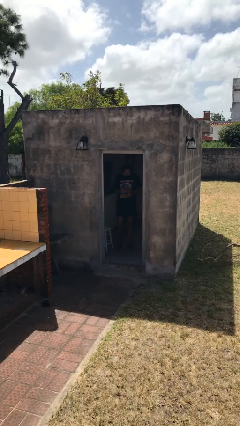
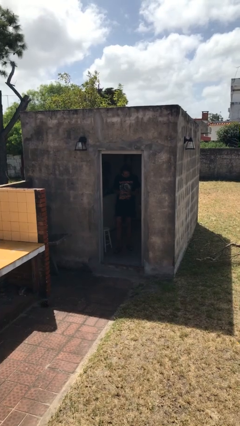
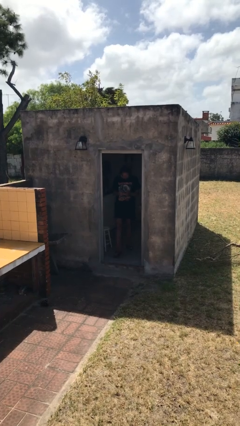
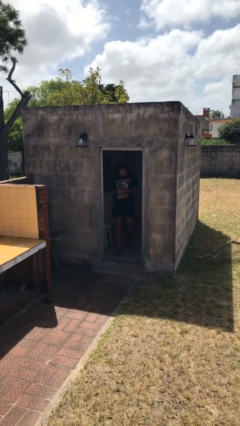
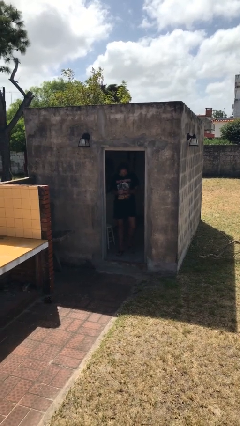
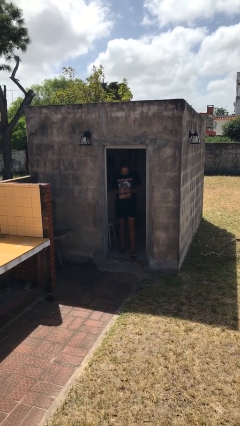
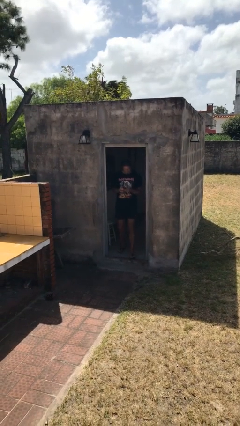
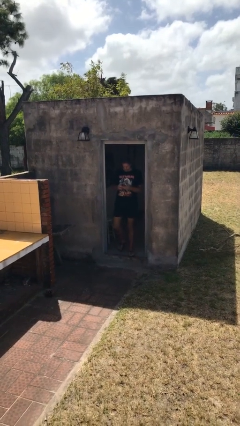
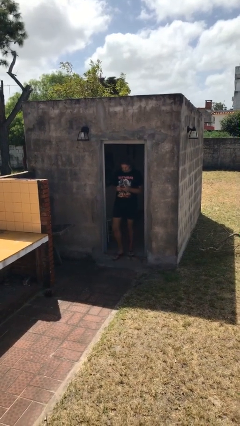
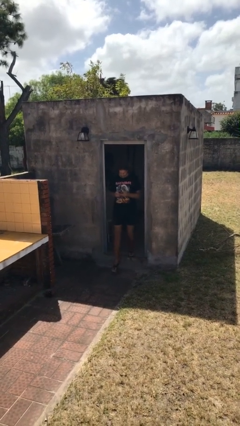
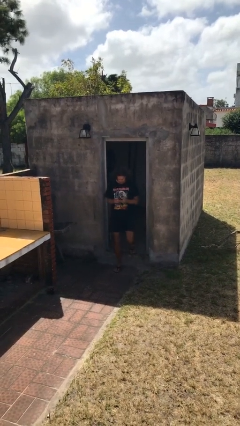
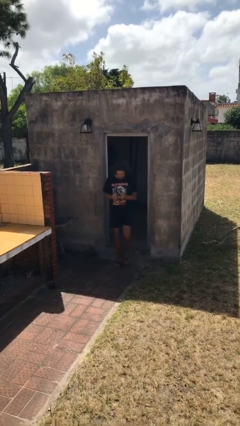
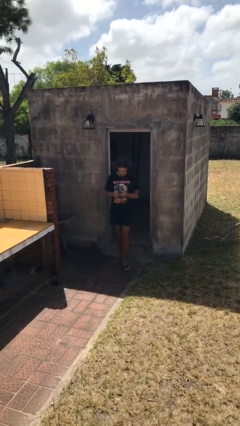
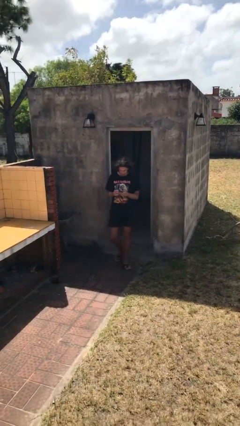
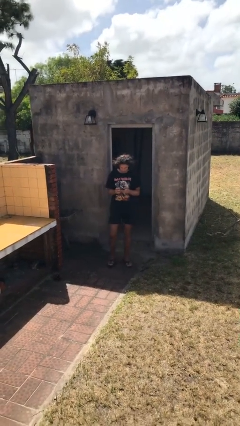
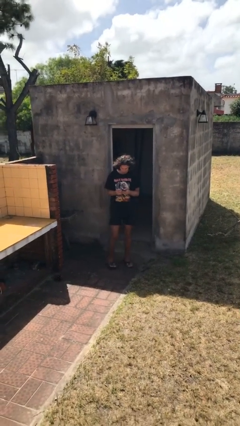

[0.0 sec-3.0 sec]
person enters scene through structure

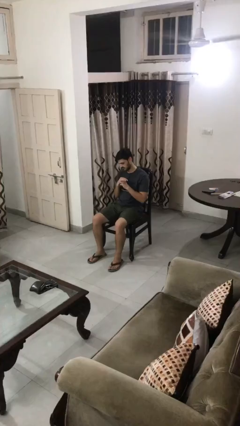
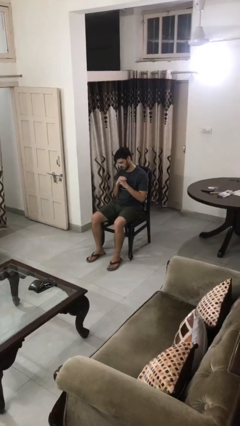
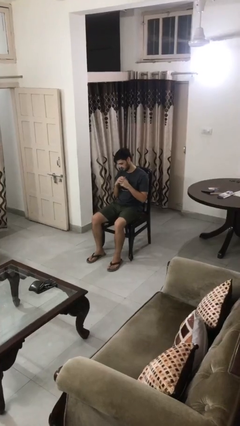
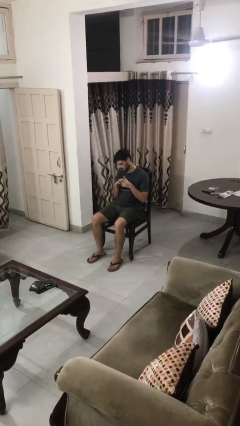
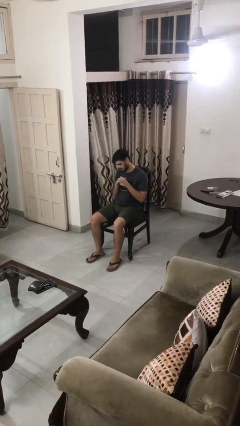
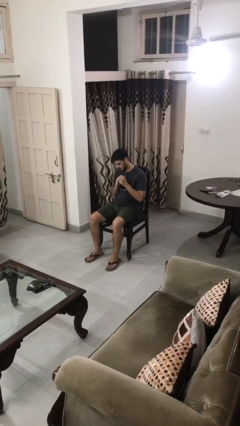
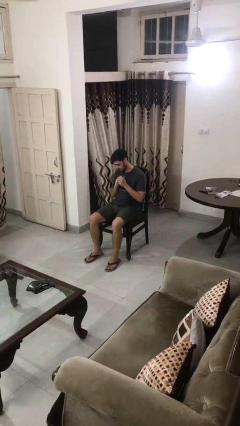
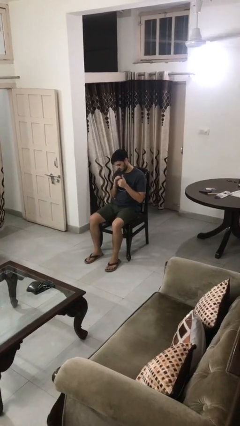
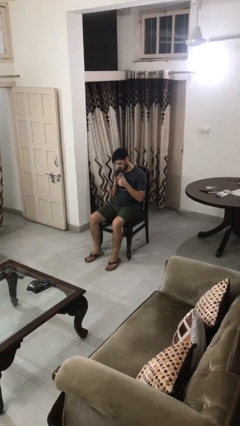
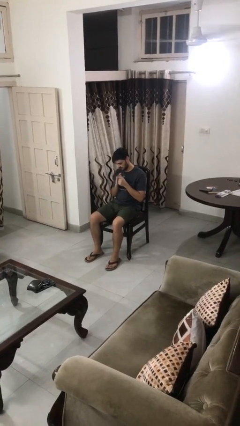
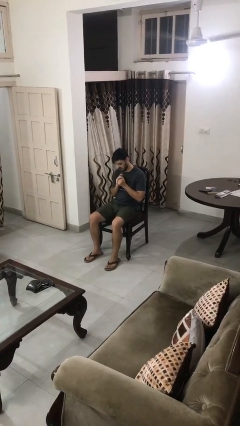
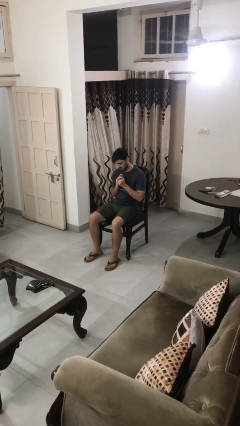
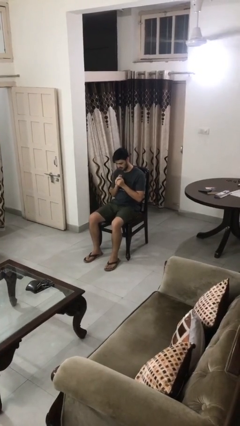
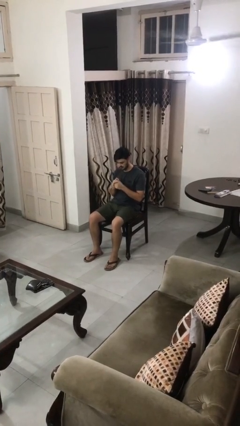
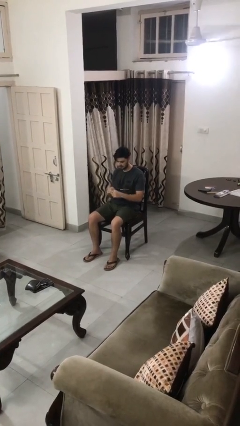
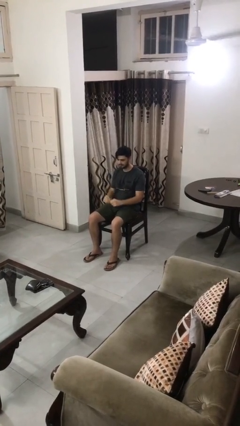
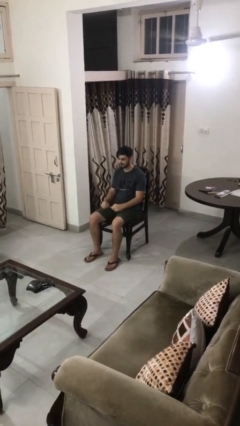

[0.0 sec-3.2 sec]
person cracks knuckles

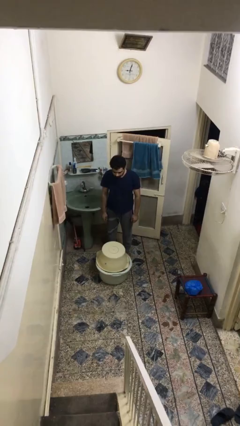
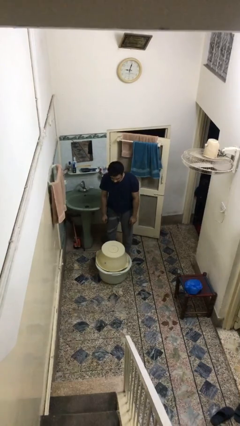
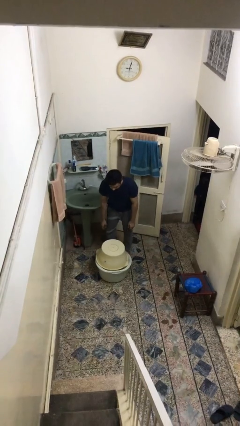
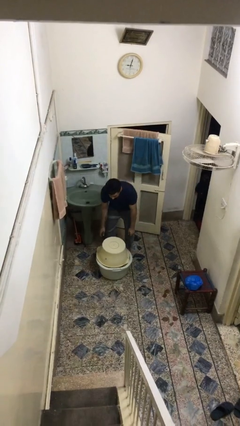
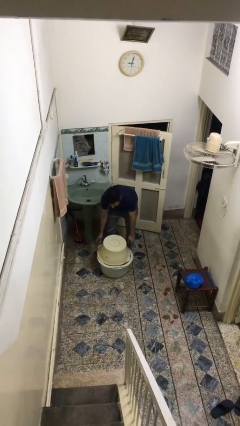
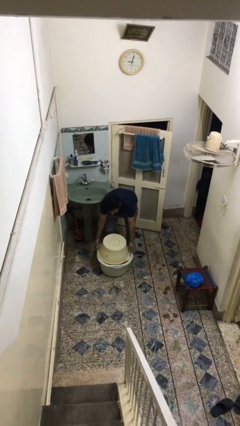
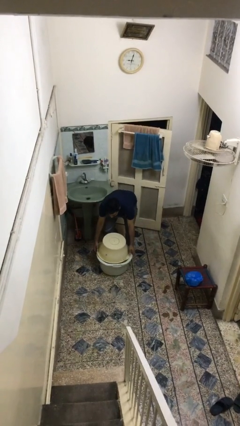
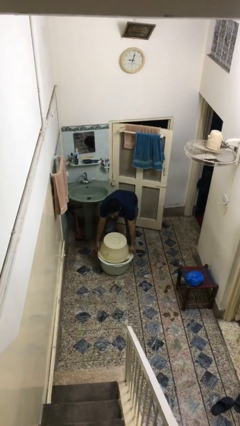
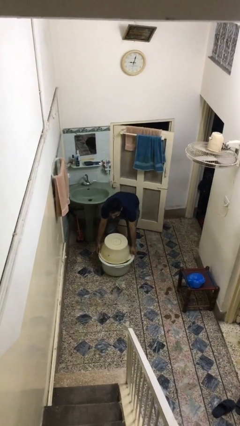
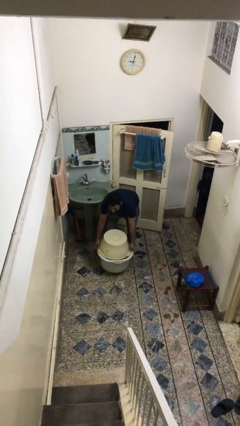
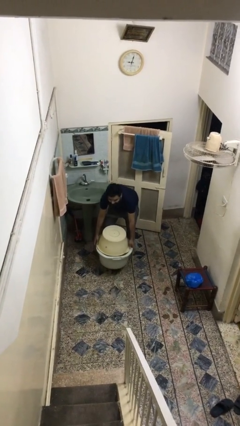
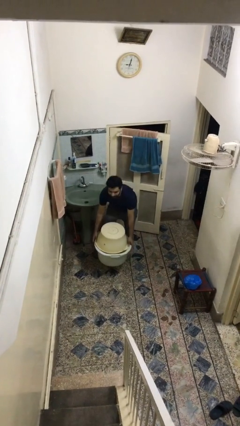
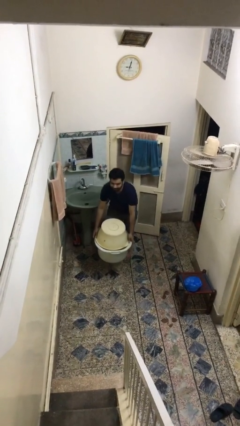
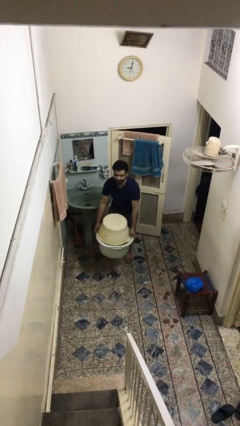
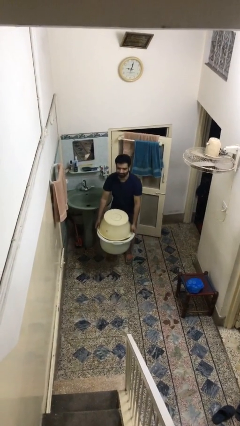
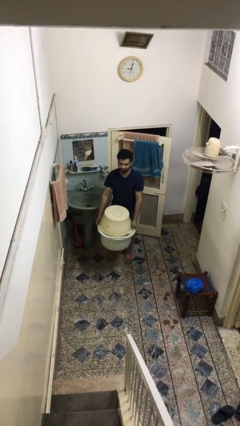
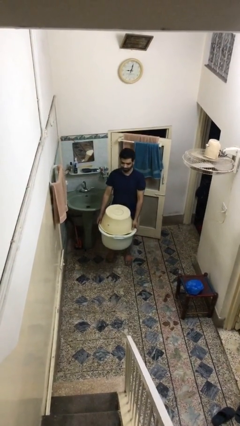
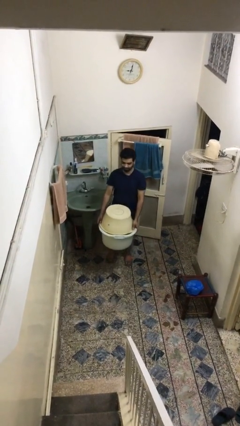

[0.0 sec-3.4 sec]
person picks up object from floor

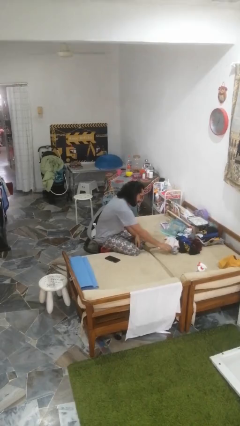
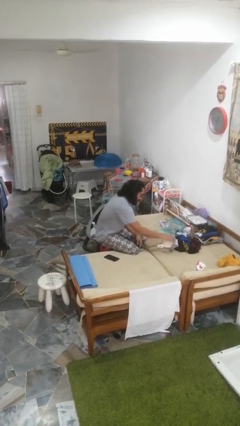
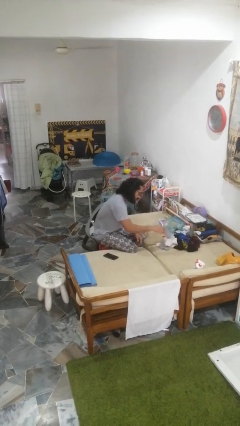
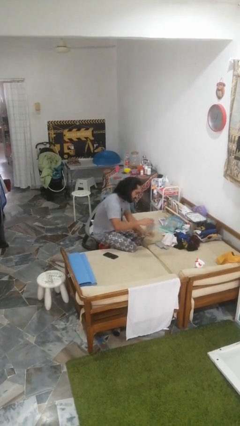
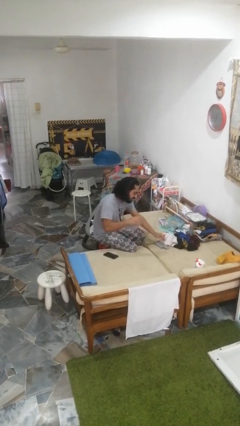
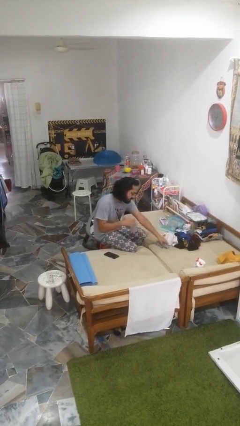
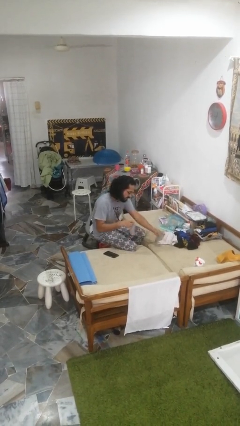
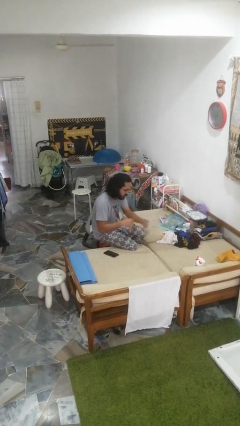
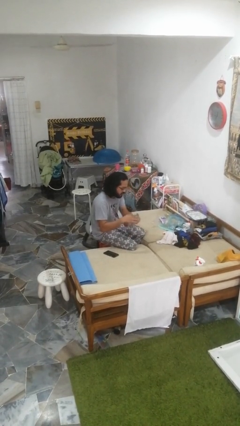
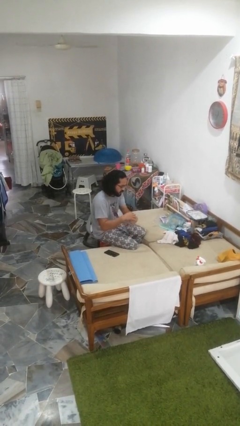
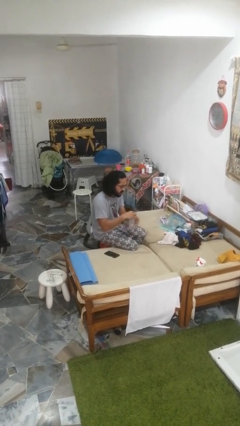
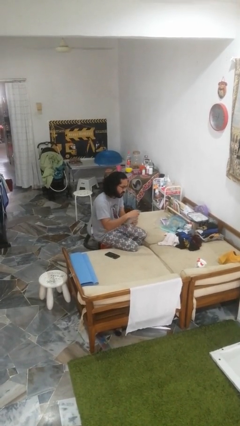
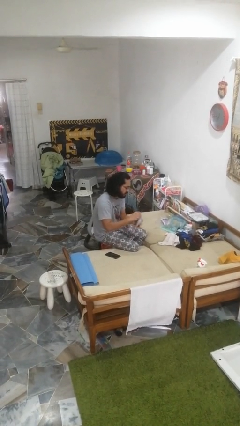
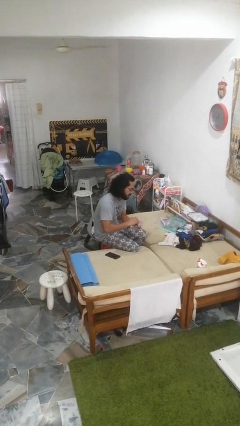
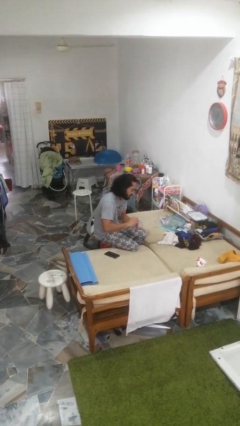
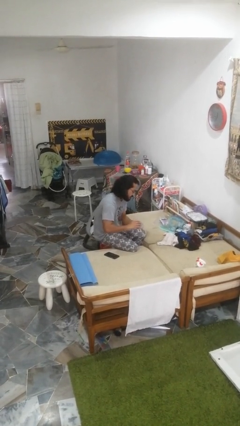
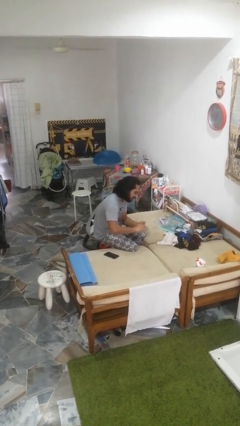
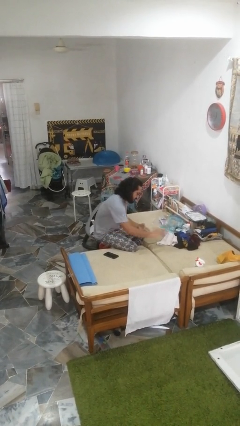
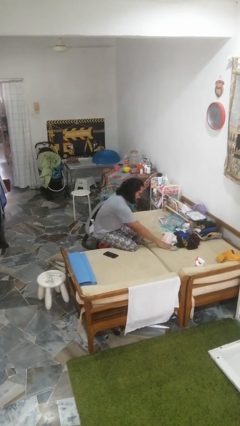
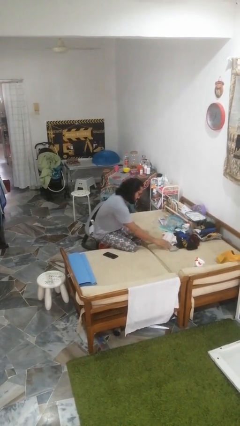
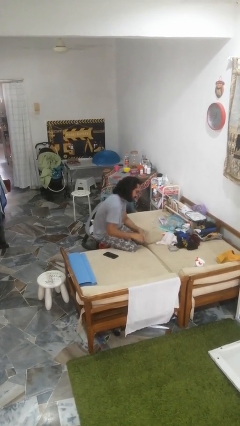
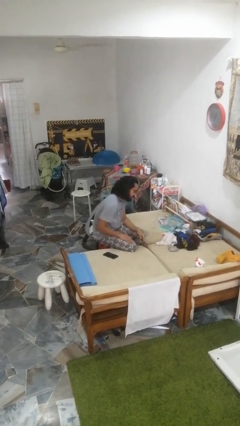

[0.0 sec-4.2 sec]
person folds socks

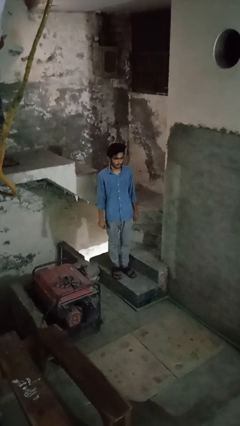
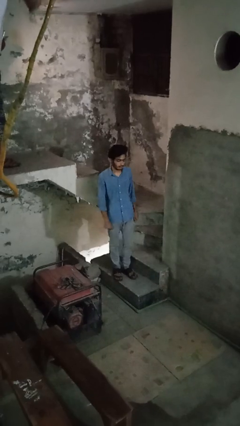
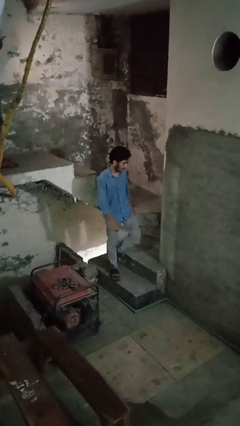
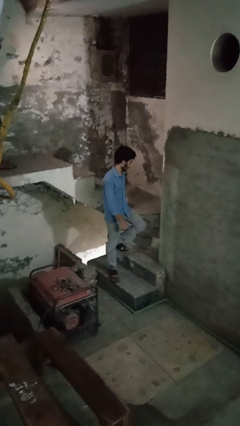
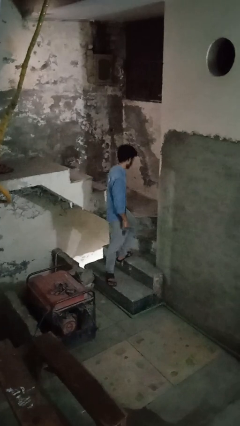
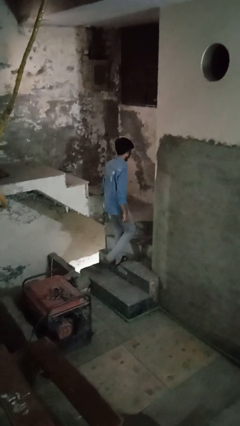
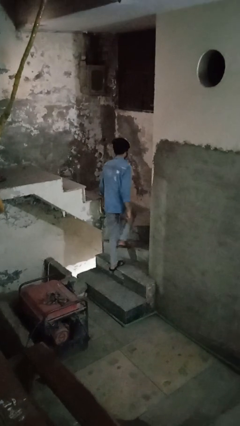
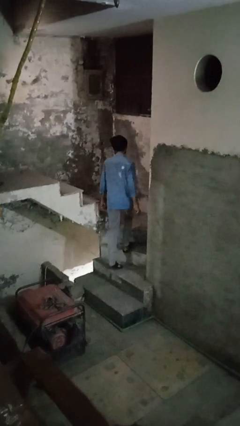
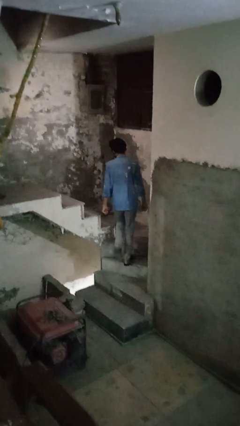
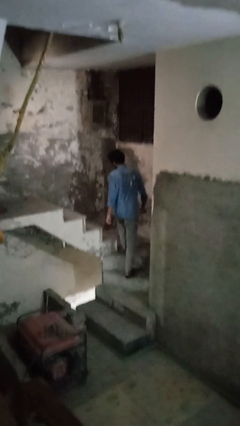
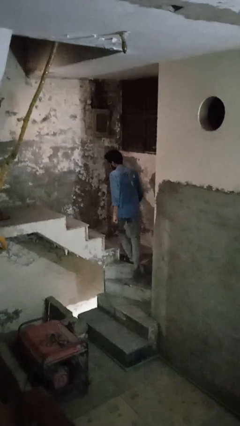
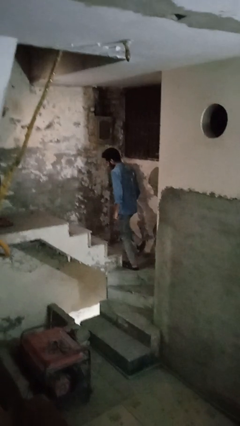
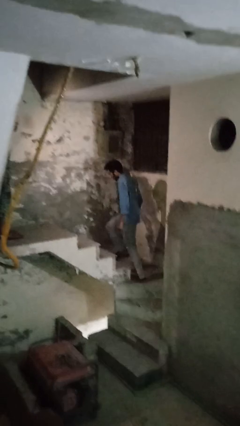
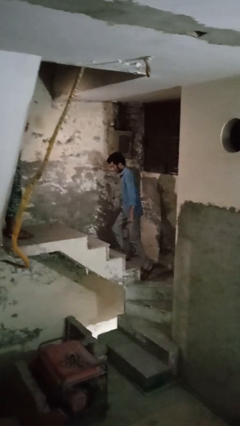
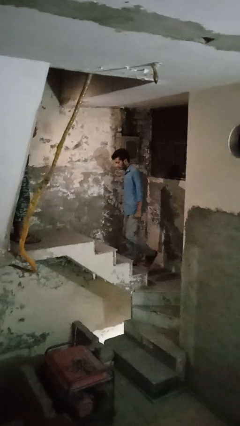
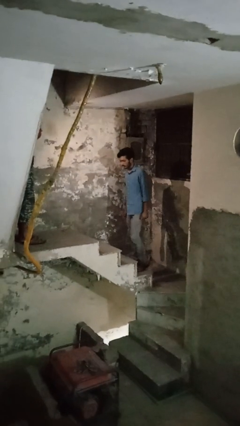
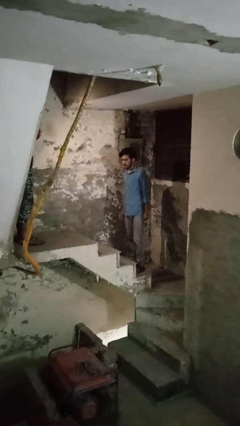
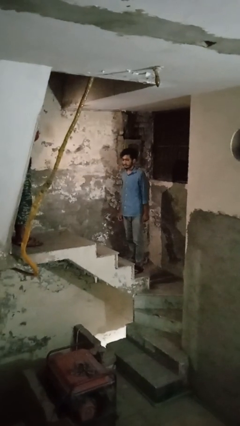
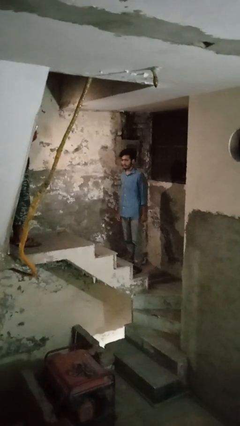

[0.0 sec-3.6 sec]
person climbs up stairs

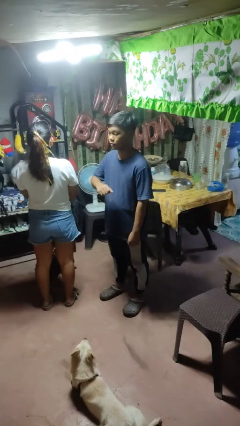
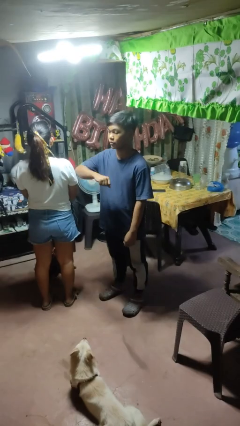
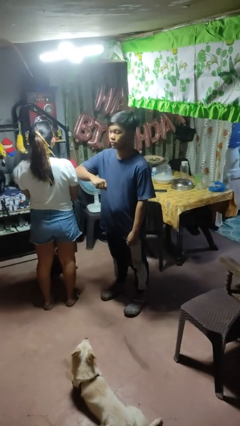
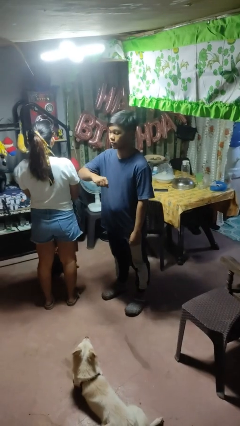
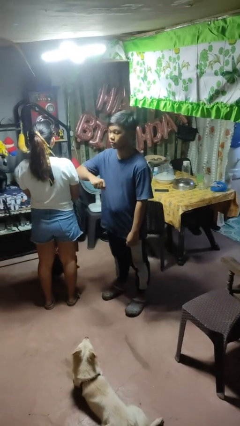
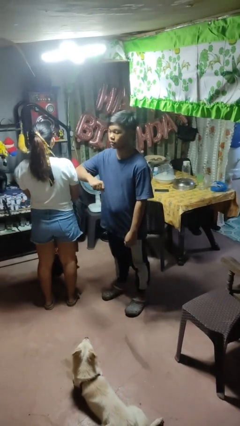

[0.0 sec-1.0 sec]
person nudges person with elbow
